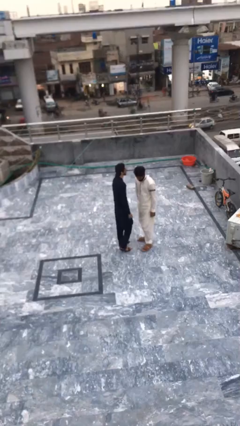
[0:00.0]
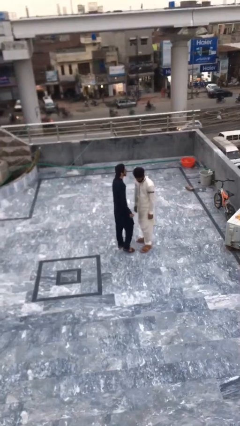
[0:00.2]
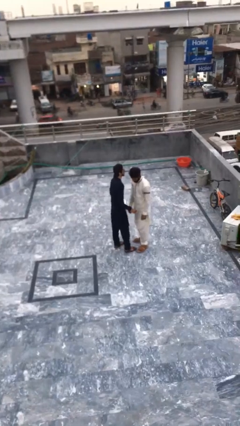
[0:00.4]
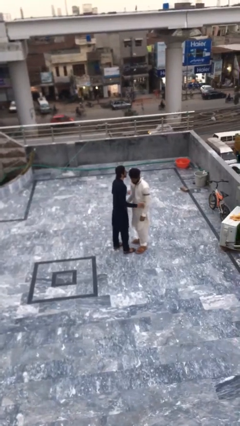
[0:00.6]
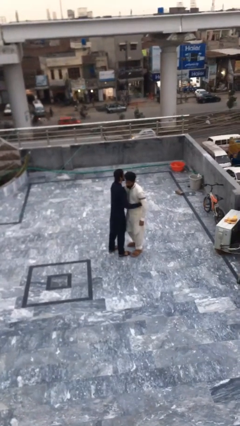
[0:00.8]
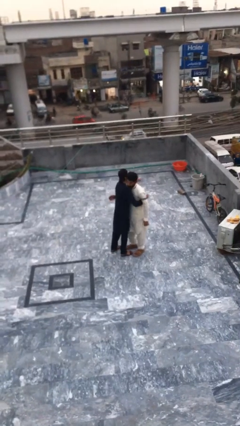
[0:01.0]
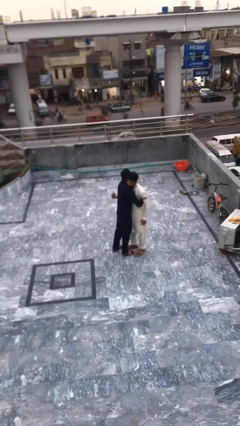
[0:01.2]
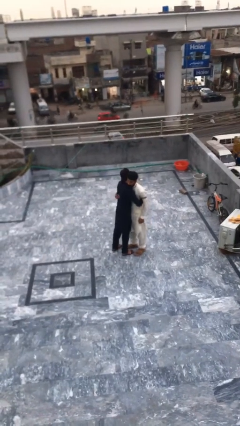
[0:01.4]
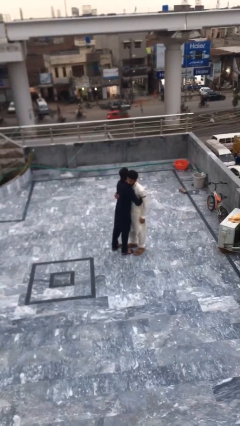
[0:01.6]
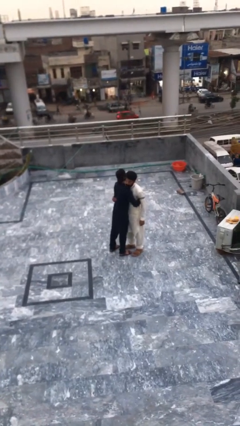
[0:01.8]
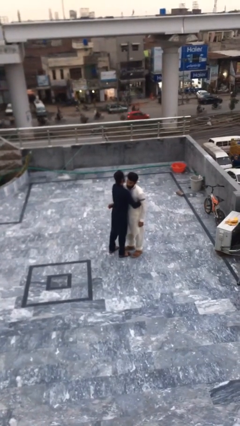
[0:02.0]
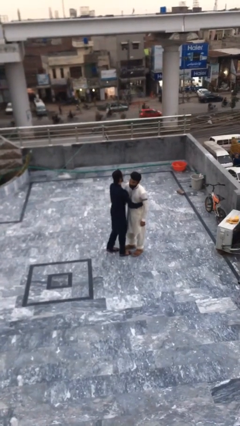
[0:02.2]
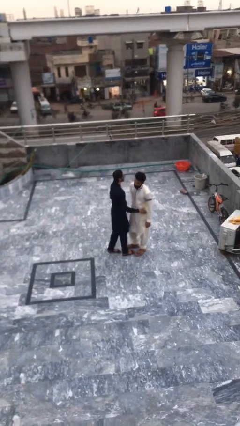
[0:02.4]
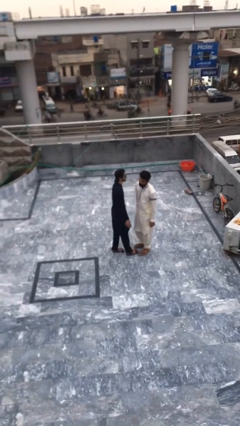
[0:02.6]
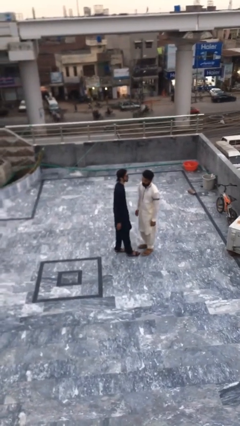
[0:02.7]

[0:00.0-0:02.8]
person embraces person

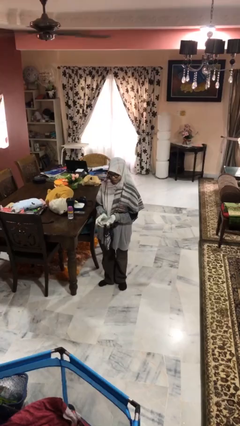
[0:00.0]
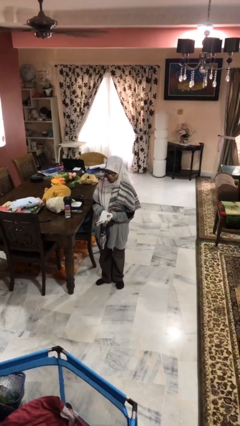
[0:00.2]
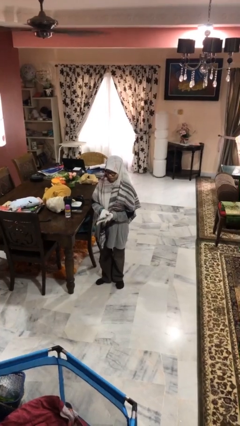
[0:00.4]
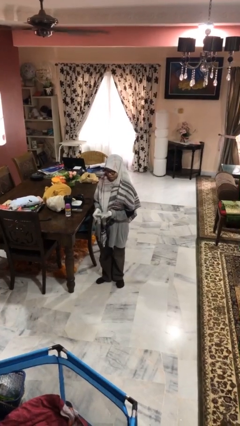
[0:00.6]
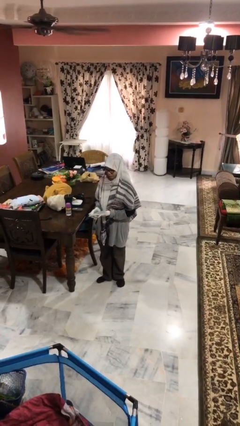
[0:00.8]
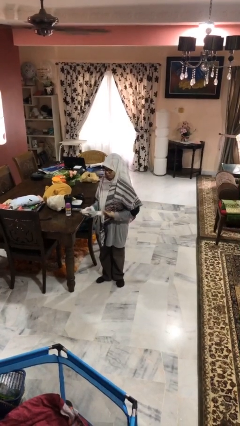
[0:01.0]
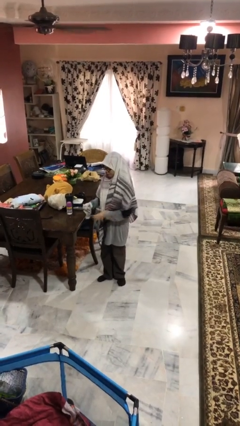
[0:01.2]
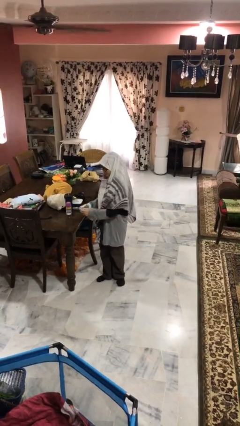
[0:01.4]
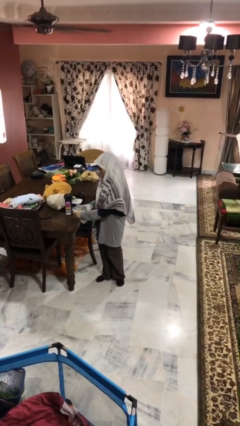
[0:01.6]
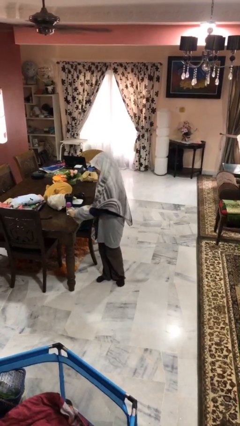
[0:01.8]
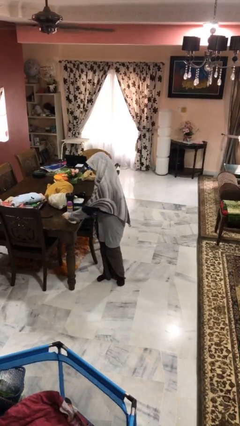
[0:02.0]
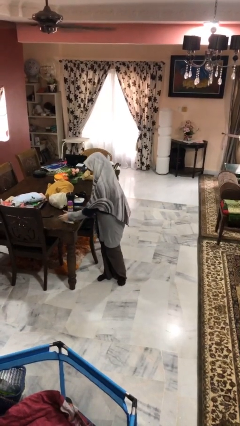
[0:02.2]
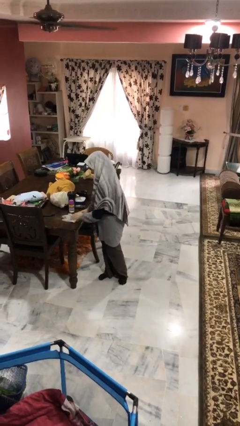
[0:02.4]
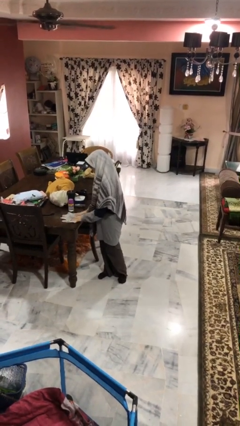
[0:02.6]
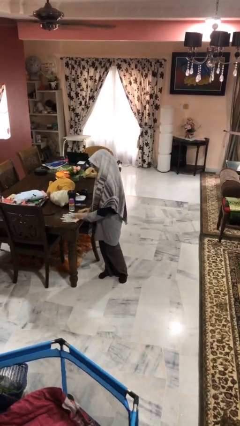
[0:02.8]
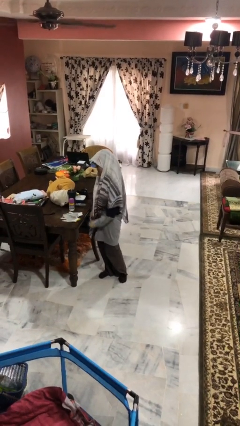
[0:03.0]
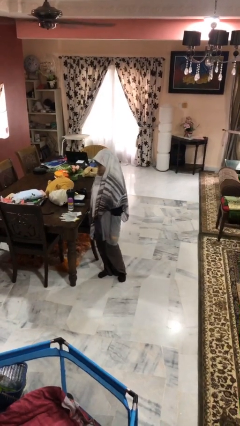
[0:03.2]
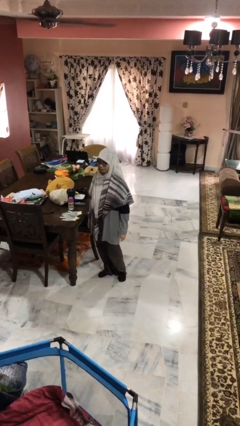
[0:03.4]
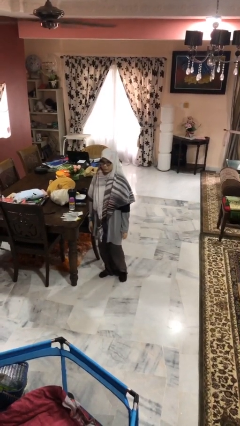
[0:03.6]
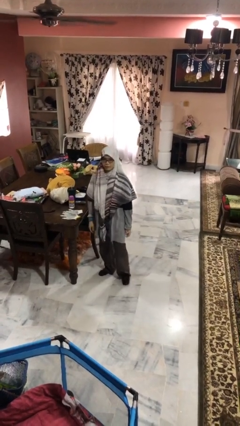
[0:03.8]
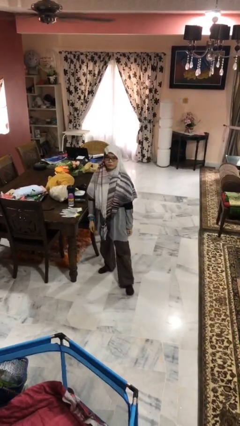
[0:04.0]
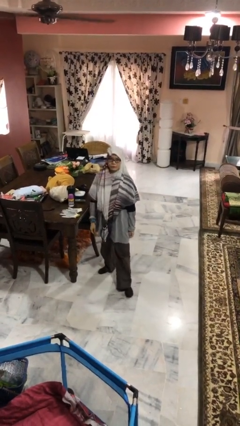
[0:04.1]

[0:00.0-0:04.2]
person takes off gloves

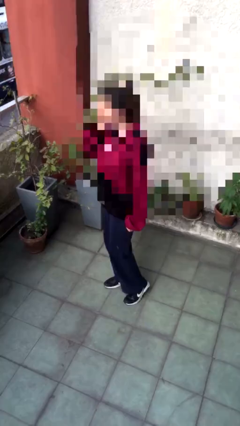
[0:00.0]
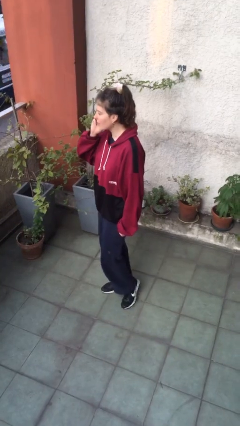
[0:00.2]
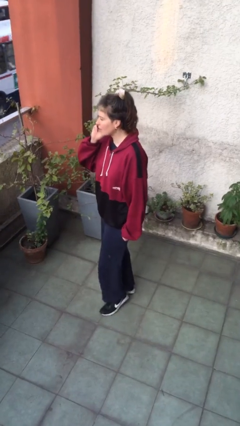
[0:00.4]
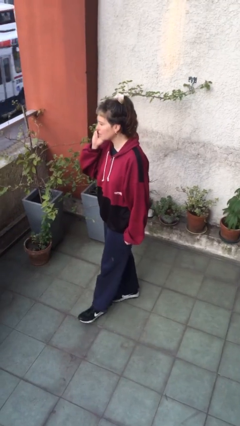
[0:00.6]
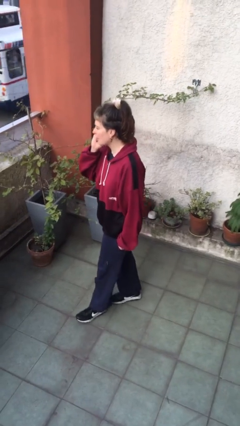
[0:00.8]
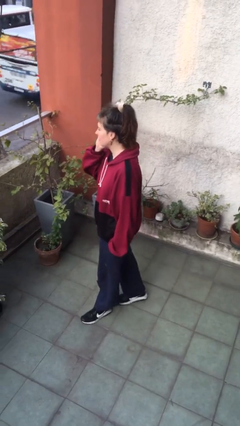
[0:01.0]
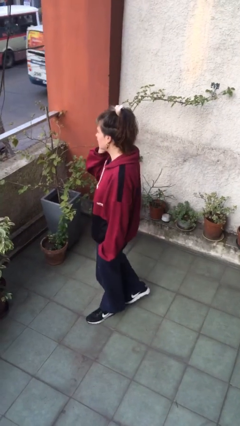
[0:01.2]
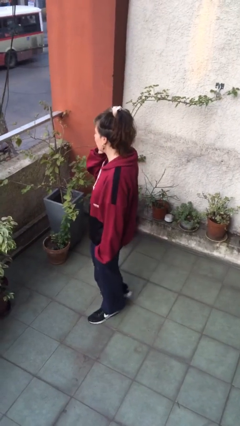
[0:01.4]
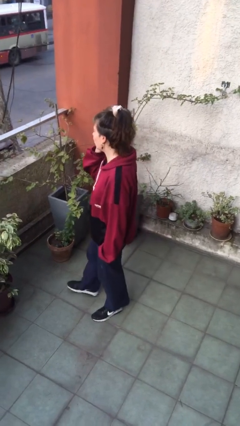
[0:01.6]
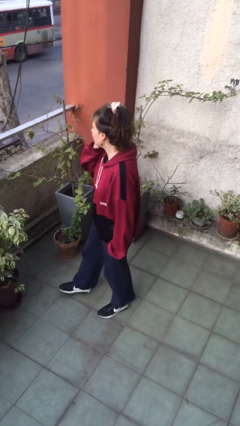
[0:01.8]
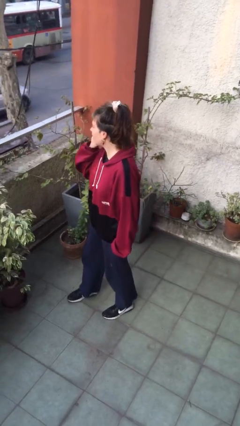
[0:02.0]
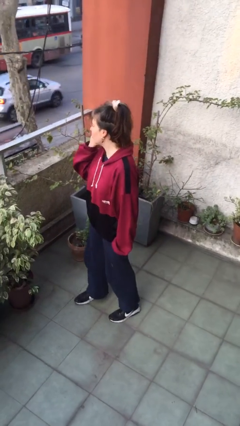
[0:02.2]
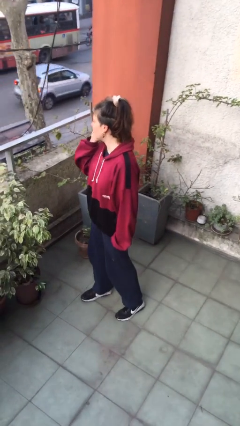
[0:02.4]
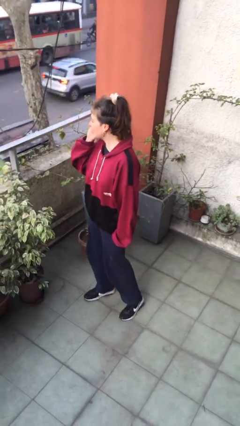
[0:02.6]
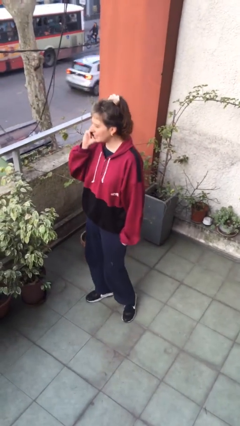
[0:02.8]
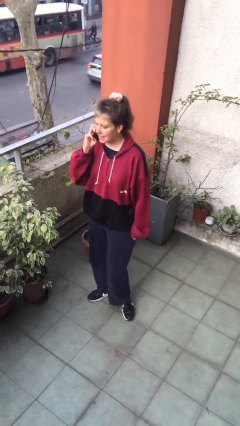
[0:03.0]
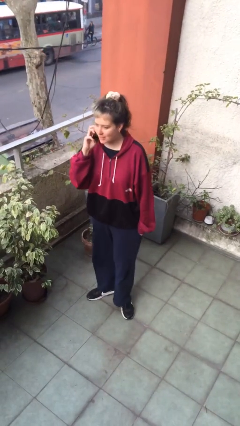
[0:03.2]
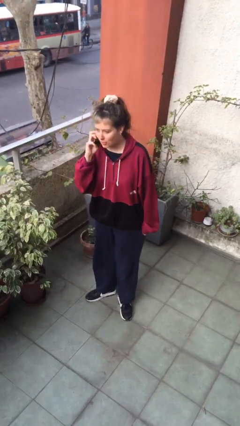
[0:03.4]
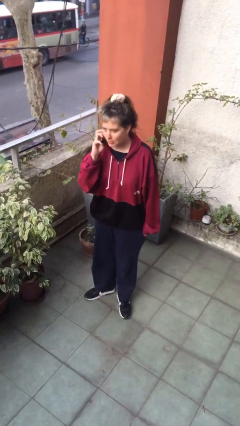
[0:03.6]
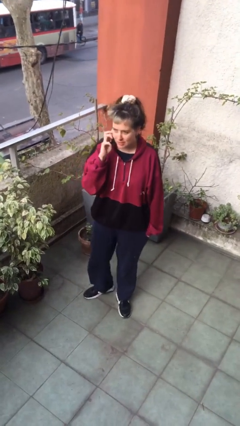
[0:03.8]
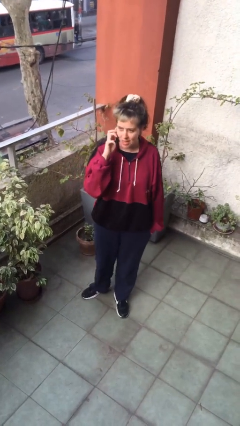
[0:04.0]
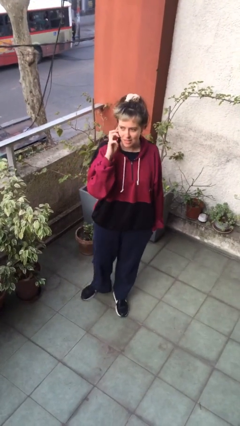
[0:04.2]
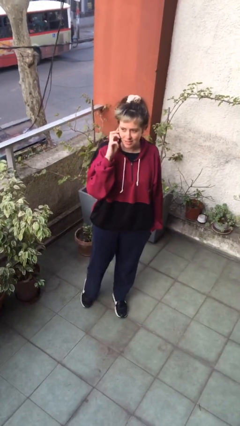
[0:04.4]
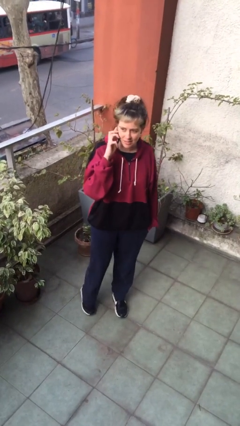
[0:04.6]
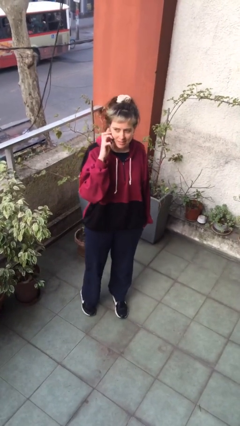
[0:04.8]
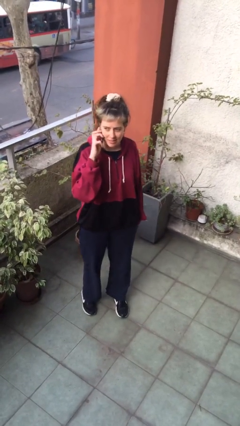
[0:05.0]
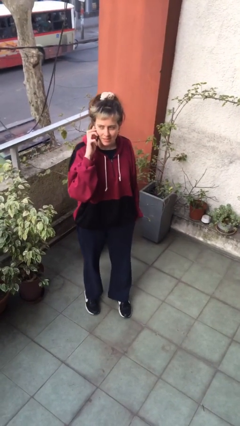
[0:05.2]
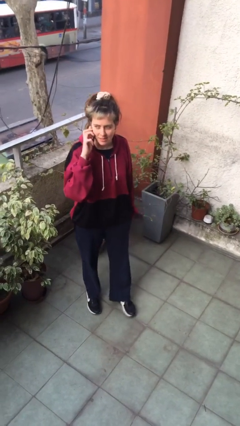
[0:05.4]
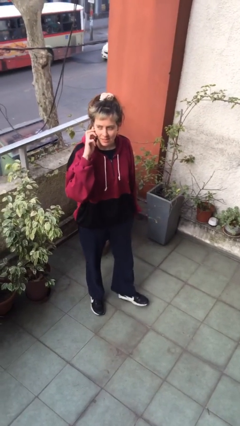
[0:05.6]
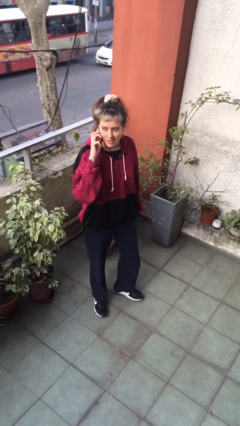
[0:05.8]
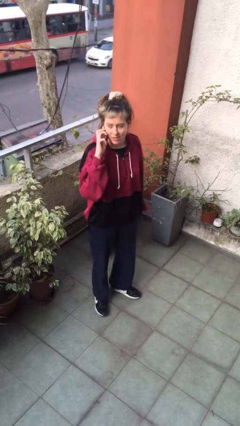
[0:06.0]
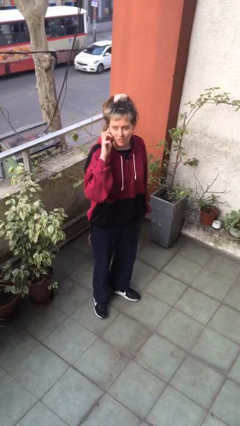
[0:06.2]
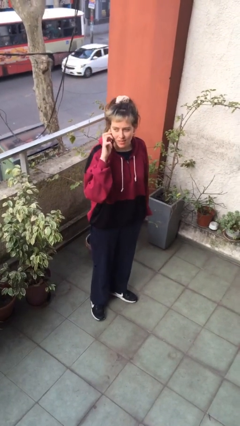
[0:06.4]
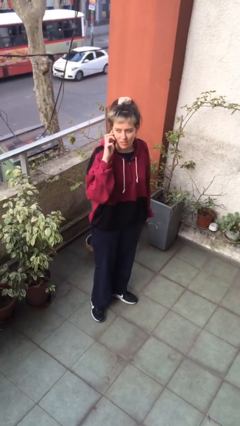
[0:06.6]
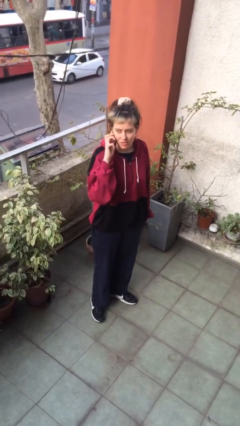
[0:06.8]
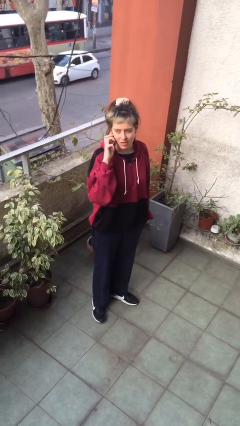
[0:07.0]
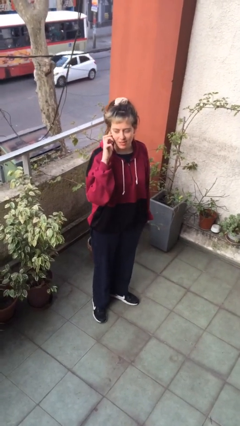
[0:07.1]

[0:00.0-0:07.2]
person talks on phone

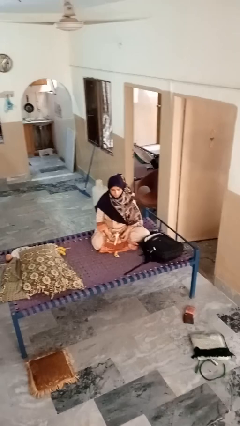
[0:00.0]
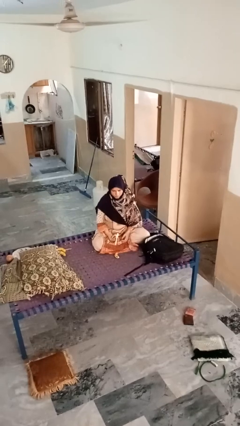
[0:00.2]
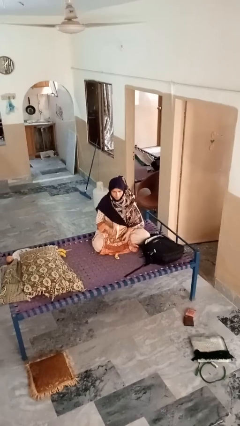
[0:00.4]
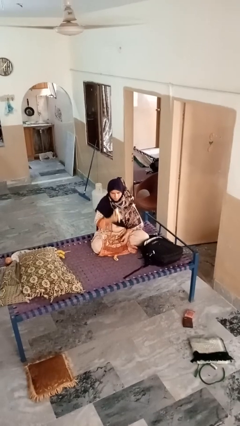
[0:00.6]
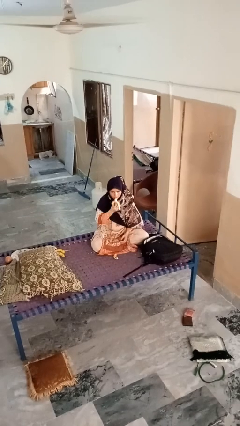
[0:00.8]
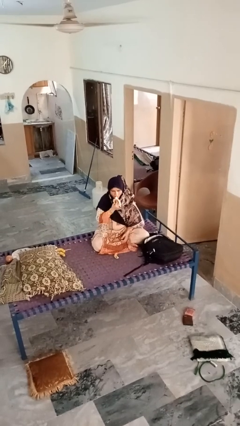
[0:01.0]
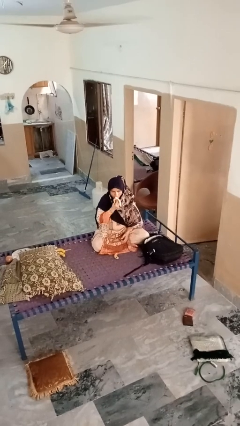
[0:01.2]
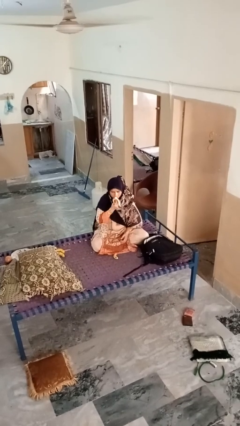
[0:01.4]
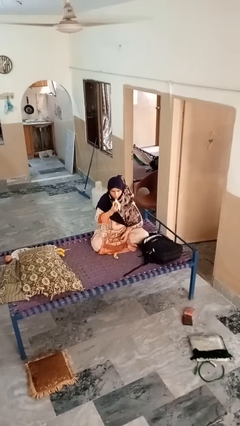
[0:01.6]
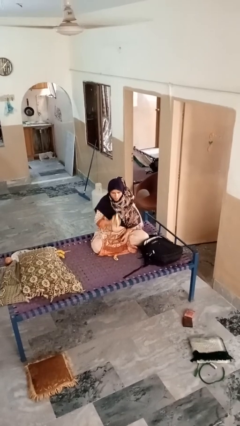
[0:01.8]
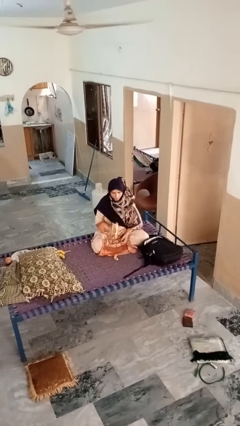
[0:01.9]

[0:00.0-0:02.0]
person eats banana

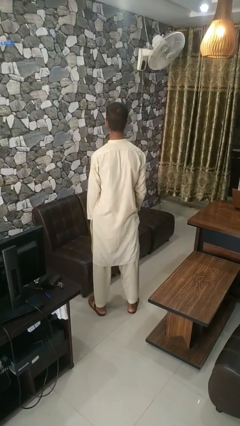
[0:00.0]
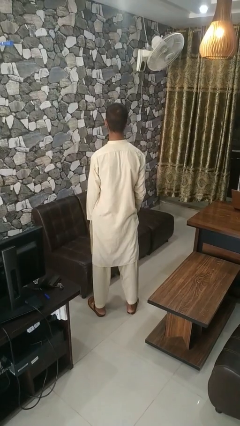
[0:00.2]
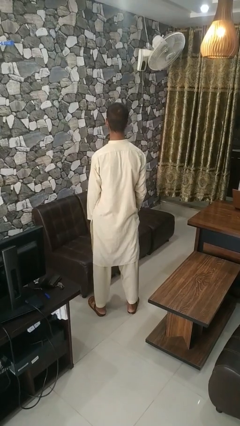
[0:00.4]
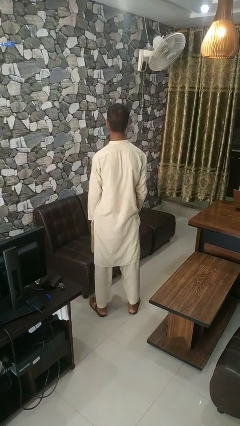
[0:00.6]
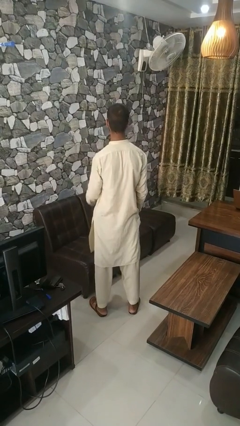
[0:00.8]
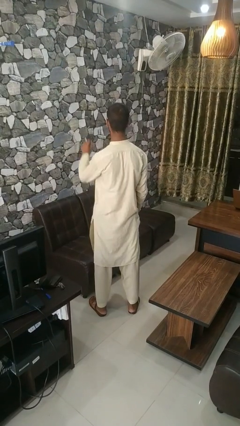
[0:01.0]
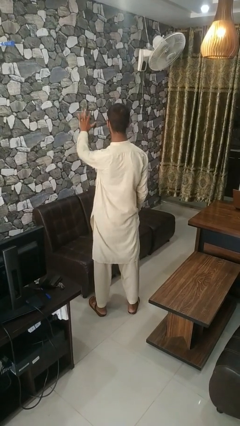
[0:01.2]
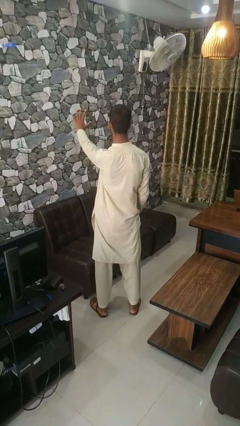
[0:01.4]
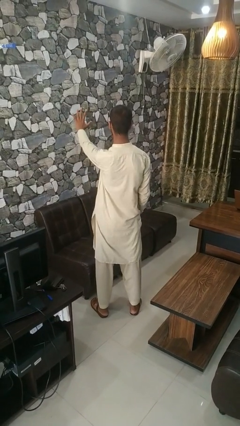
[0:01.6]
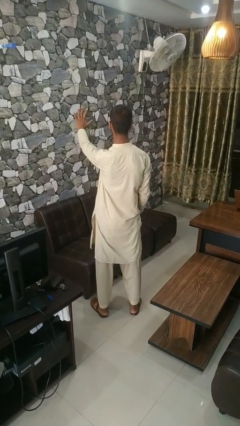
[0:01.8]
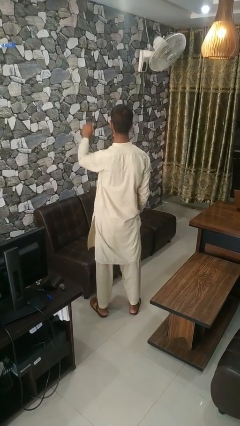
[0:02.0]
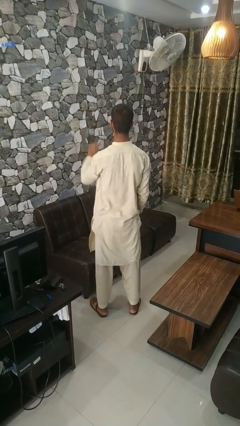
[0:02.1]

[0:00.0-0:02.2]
person gestures number five
